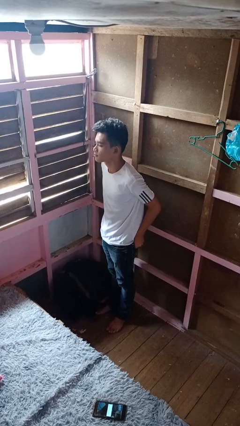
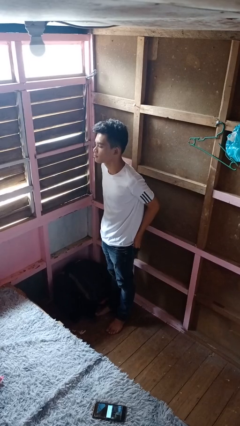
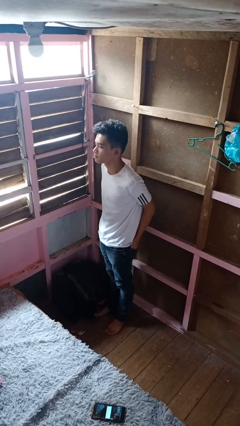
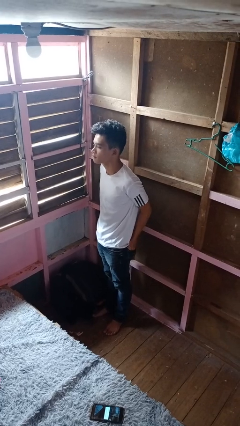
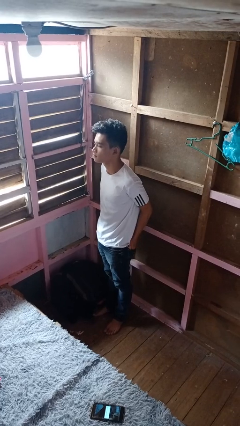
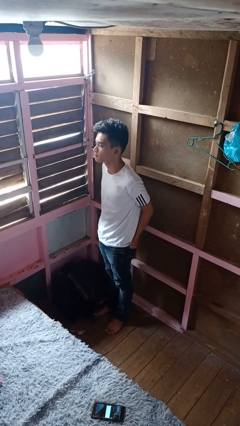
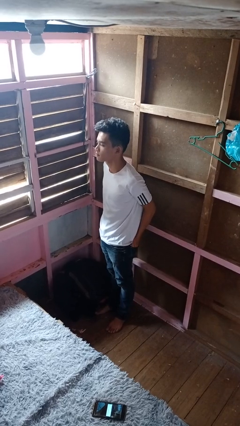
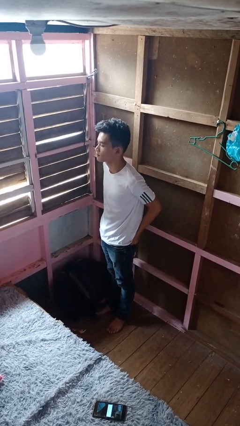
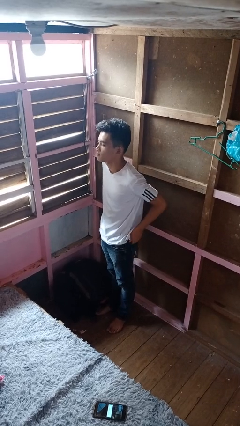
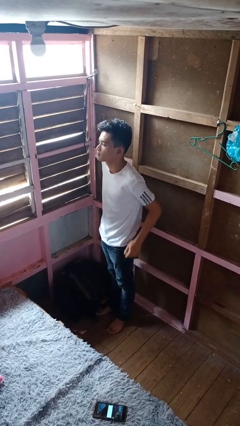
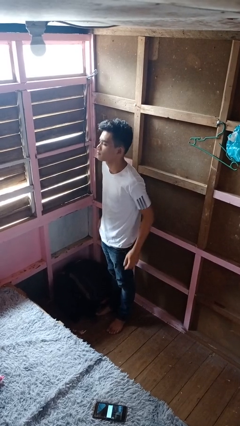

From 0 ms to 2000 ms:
person puts hands in back pockets

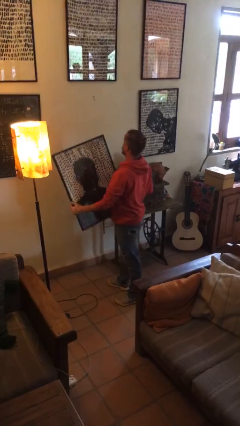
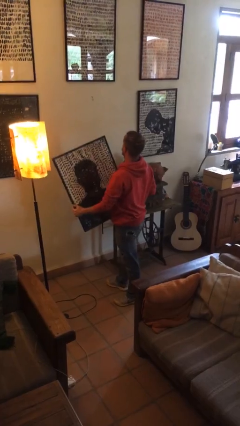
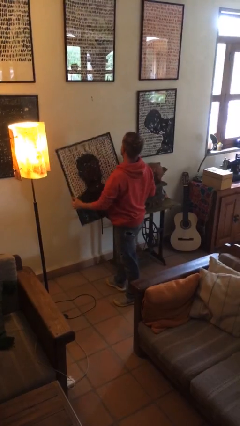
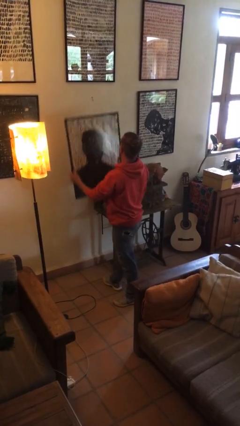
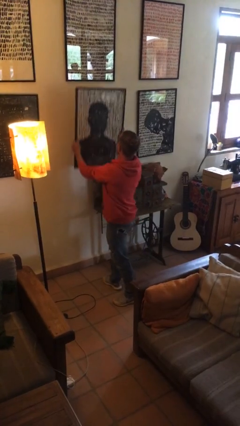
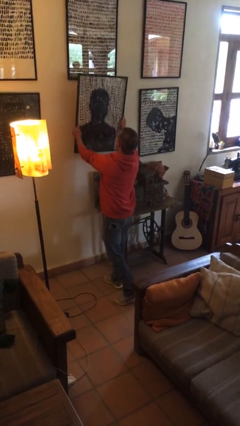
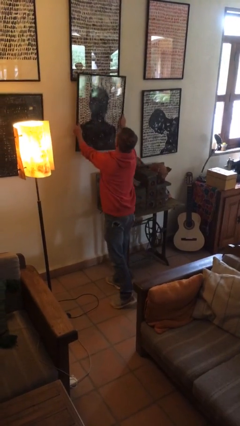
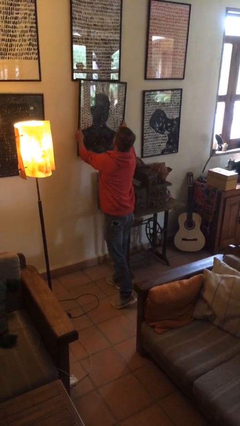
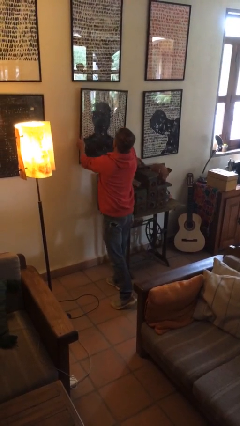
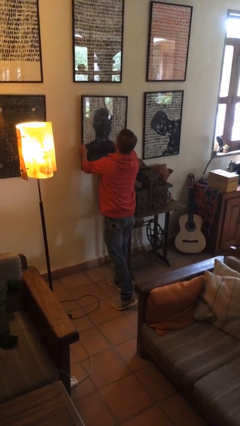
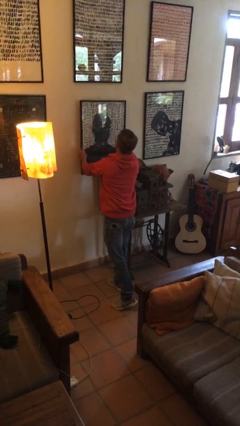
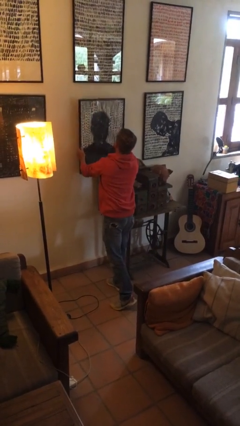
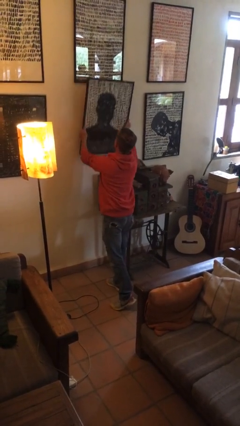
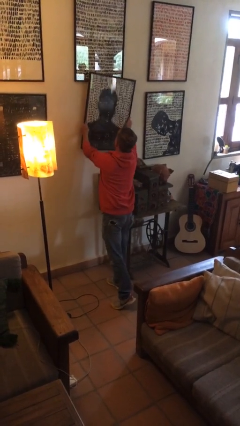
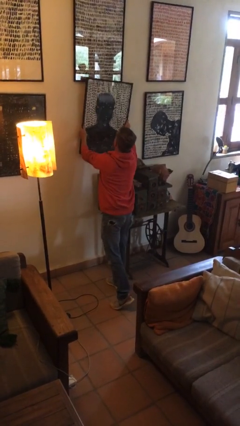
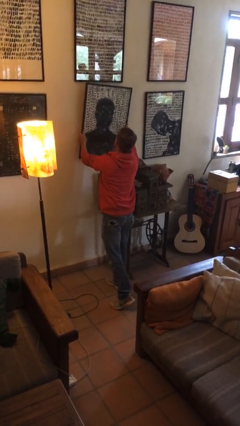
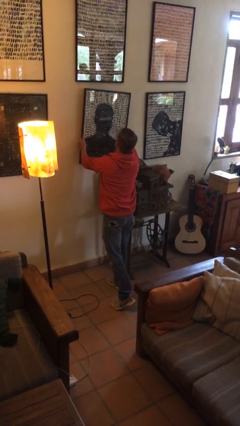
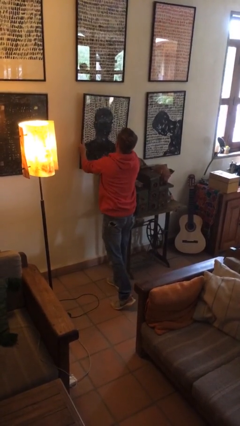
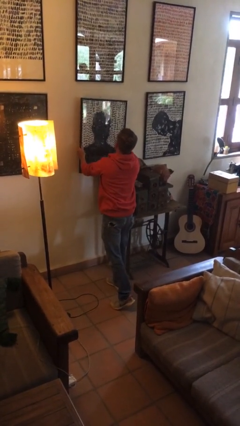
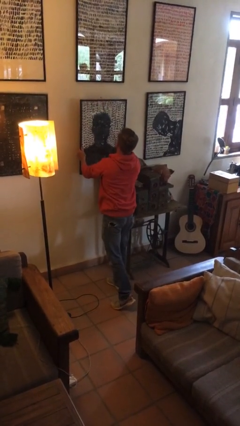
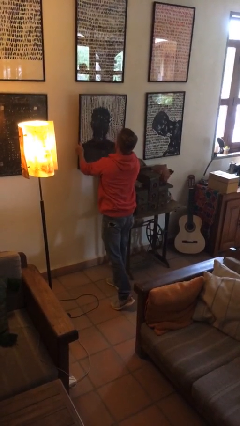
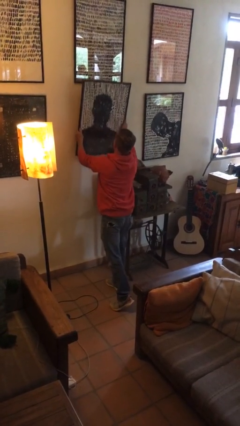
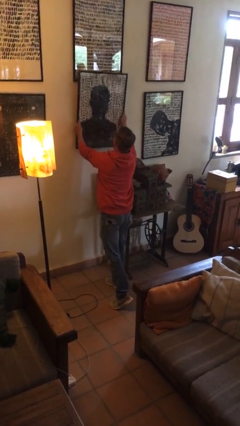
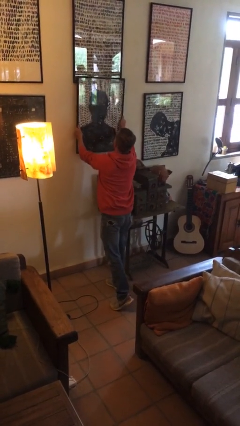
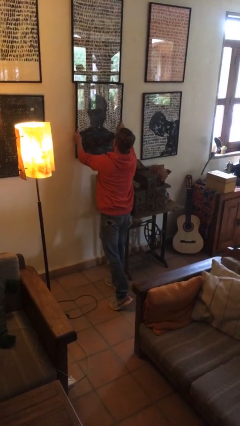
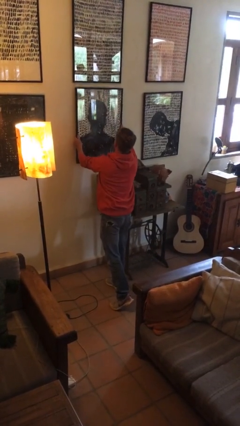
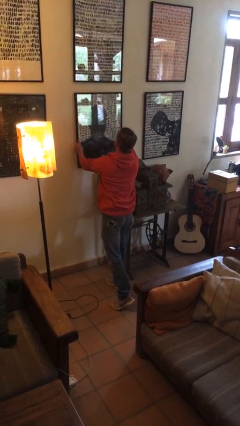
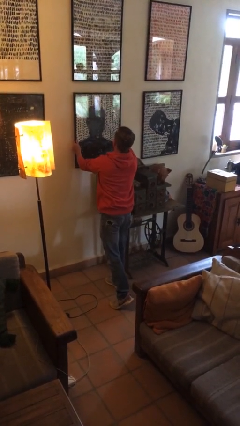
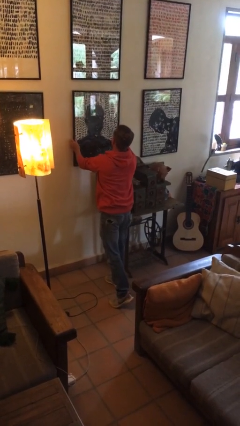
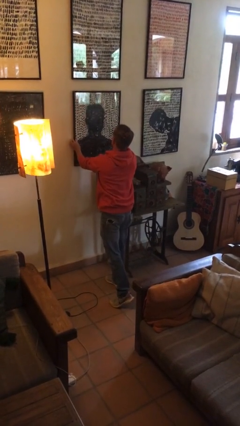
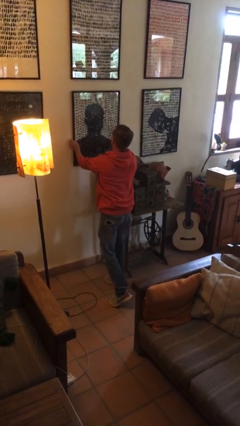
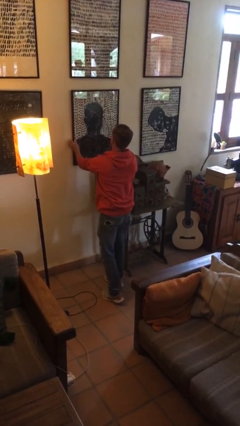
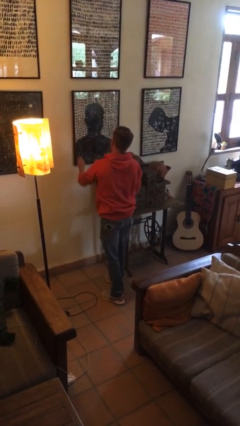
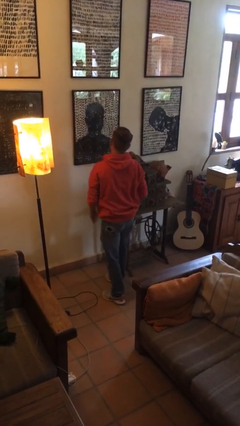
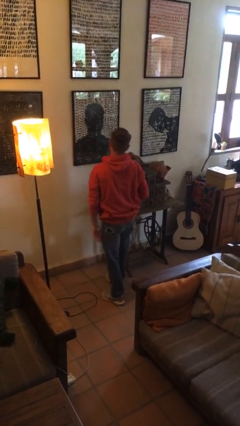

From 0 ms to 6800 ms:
person puts up picture frame

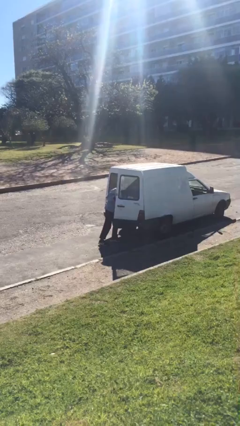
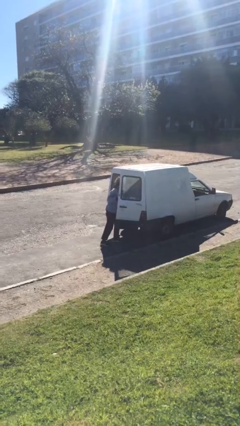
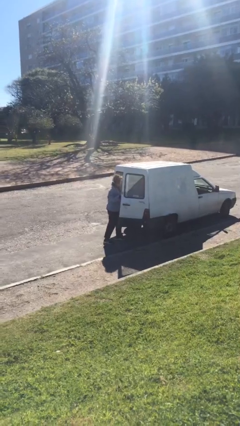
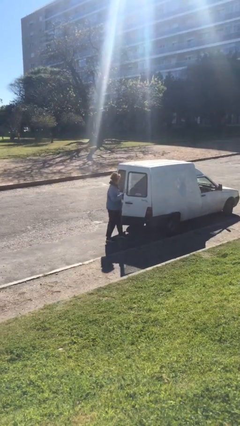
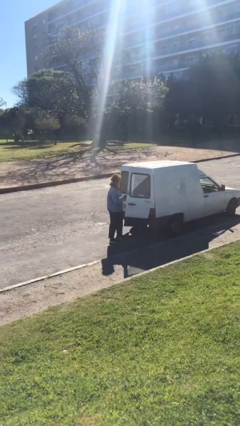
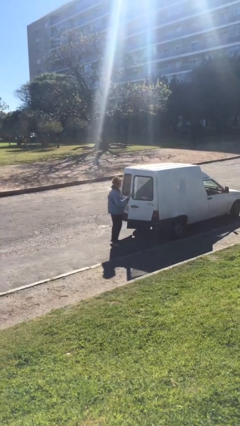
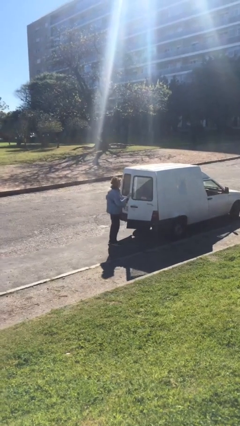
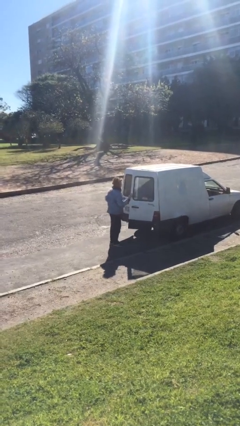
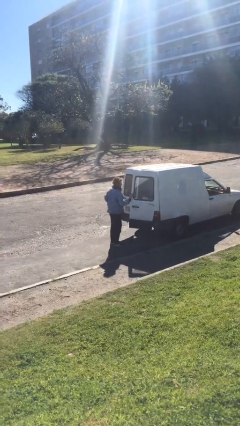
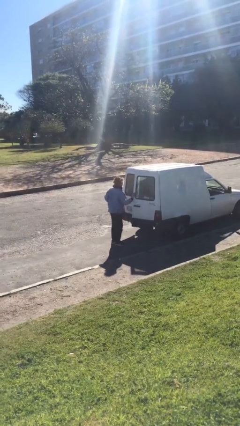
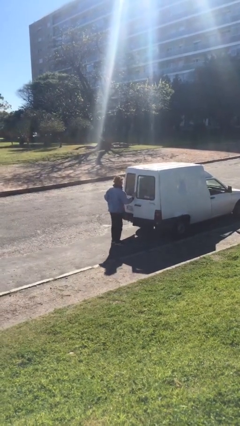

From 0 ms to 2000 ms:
person unloads car

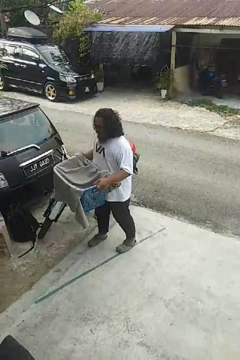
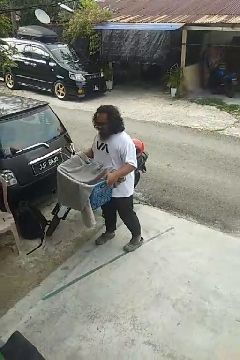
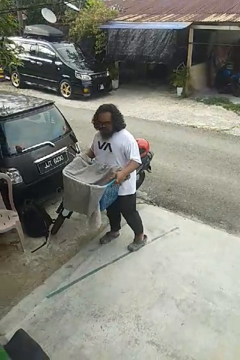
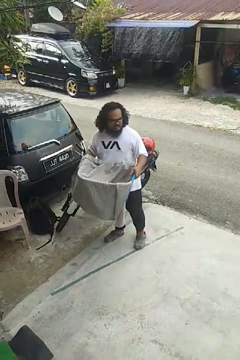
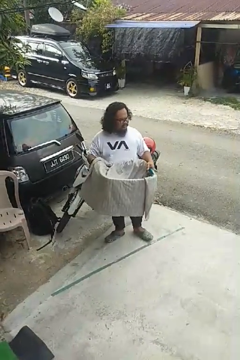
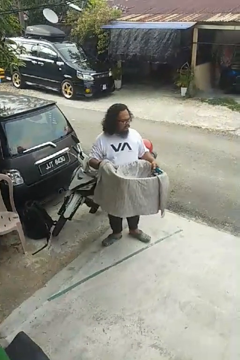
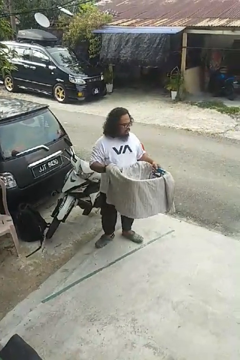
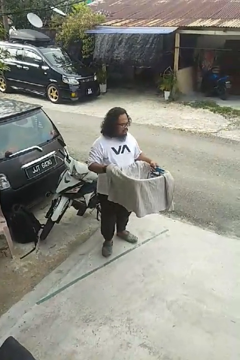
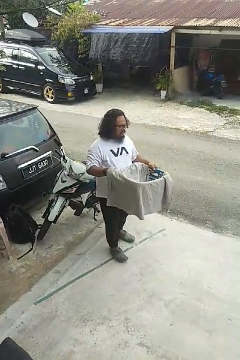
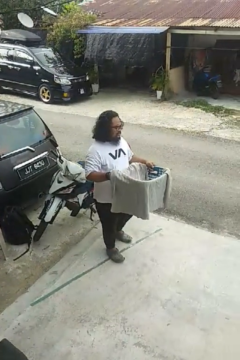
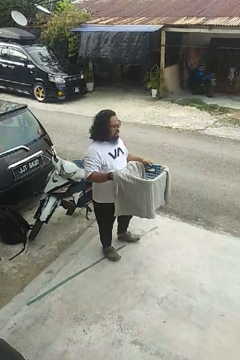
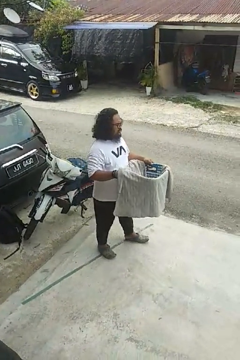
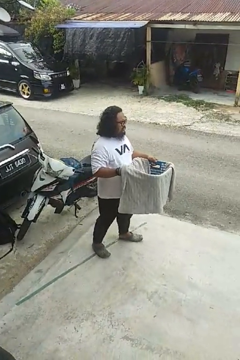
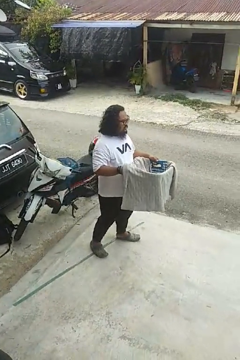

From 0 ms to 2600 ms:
person carries laundry basket

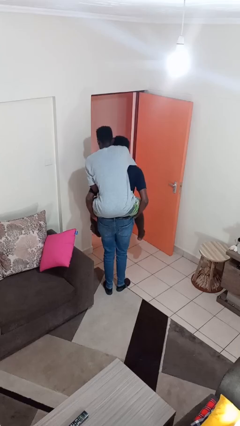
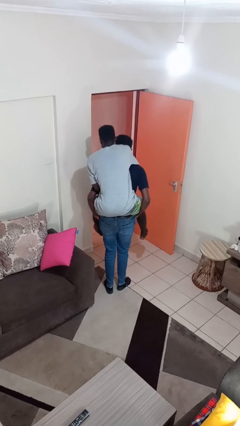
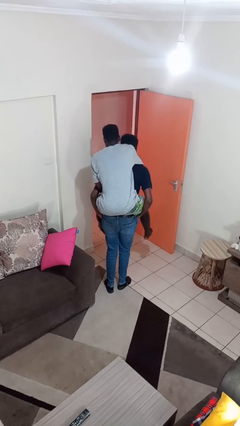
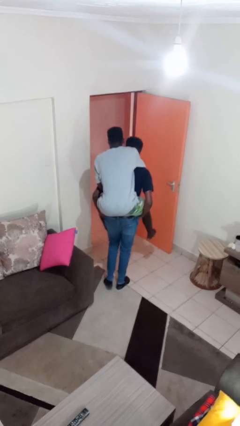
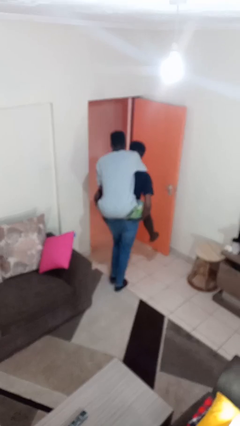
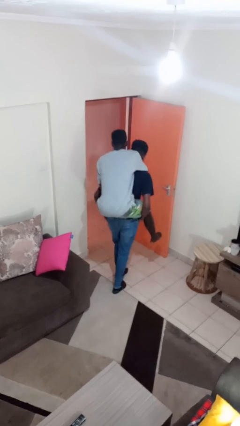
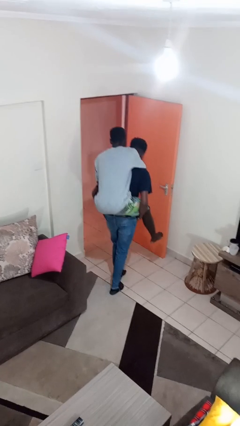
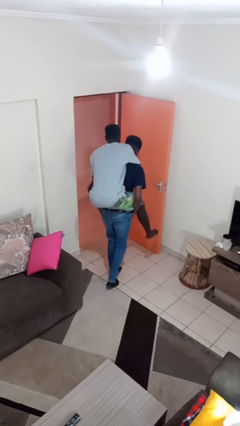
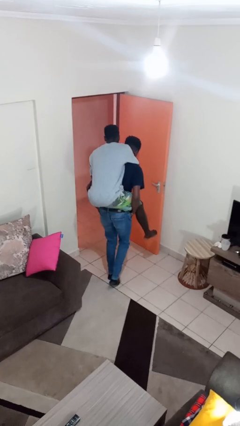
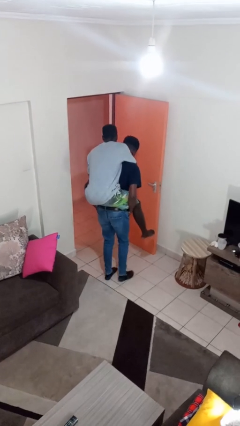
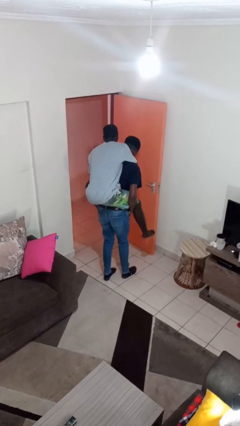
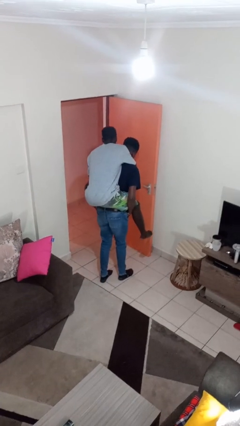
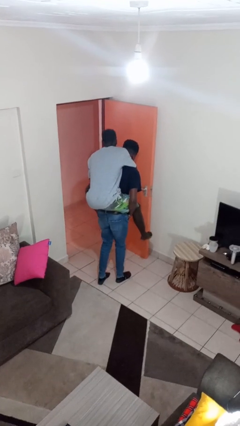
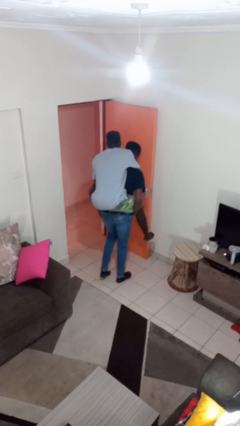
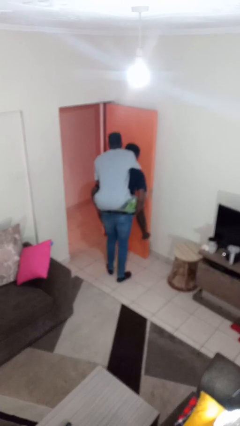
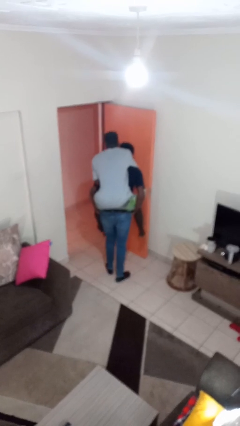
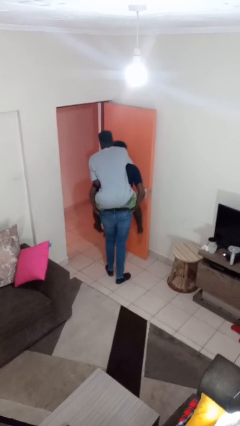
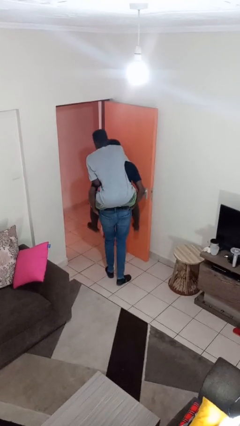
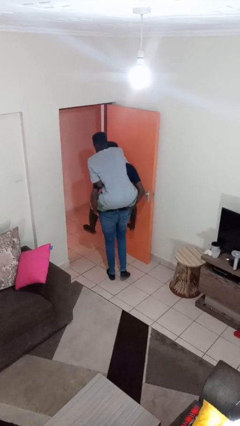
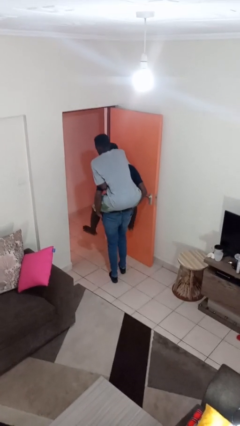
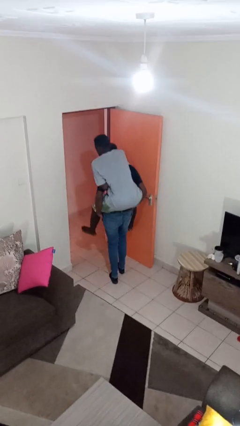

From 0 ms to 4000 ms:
person carries person on back

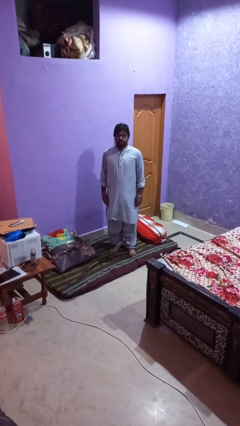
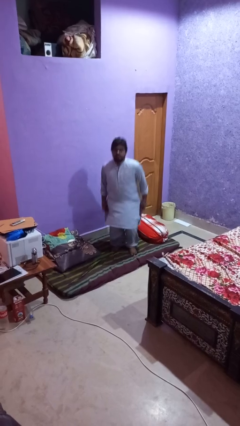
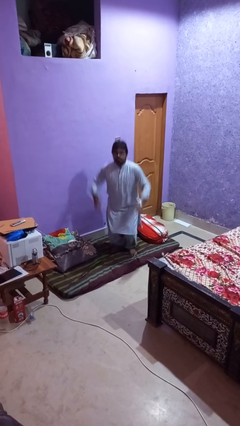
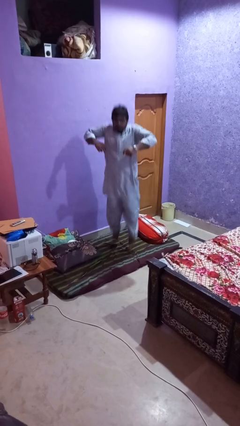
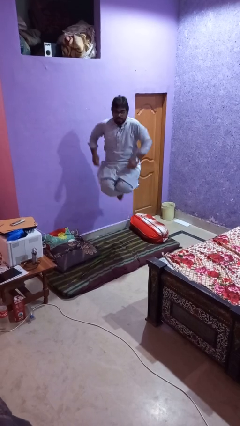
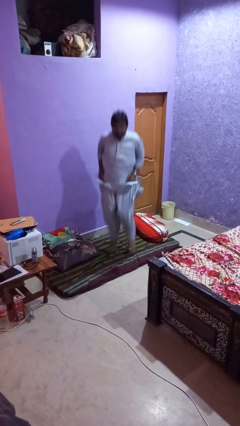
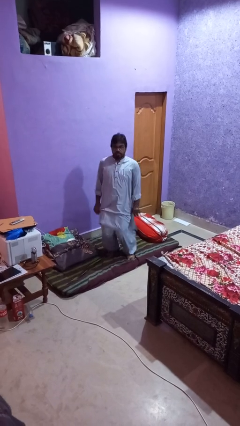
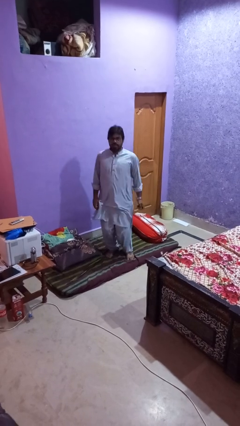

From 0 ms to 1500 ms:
person jumps
